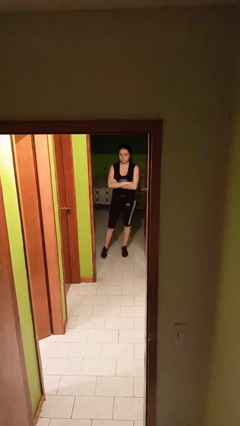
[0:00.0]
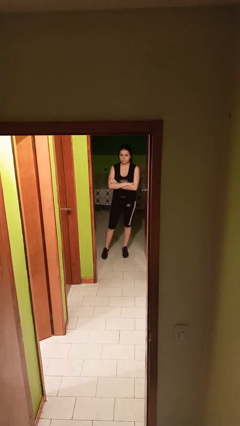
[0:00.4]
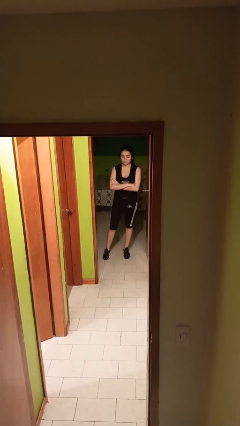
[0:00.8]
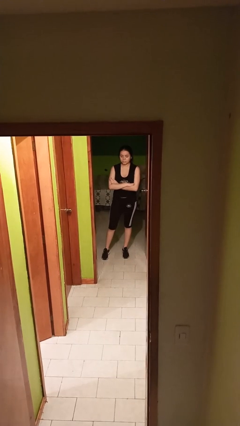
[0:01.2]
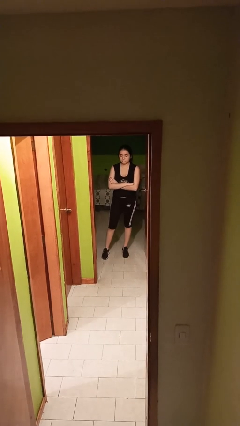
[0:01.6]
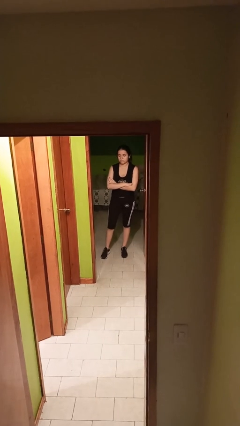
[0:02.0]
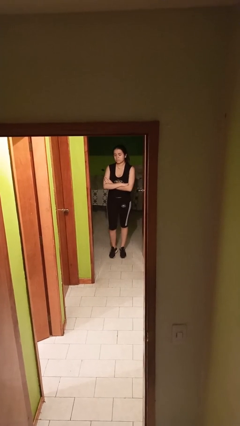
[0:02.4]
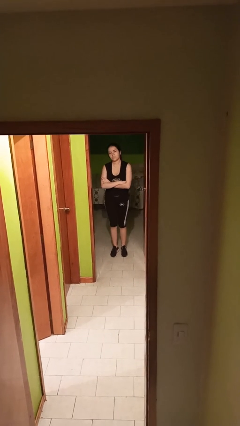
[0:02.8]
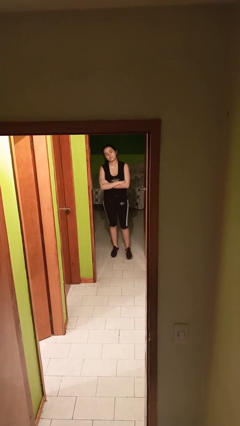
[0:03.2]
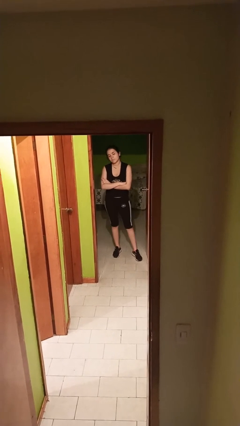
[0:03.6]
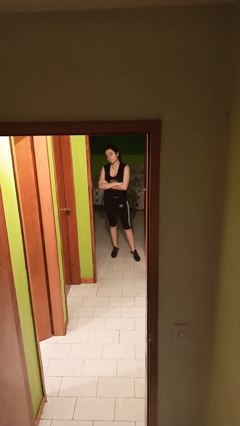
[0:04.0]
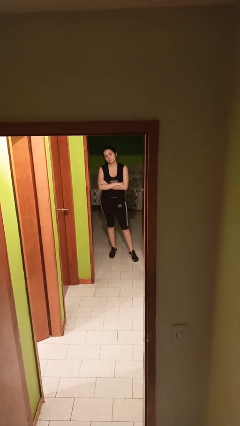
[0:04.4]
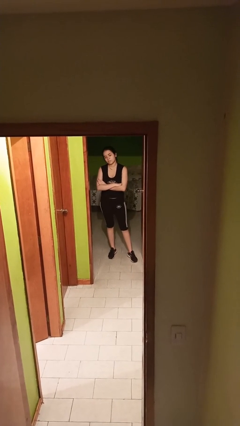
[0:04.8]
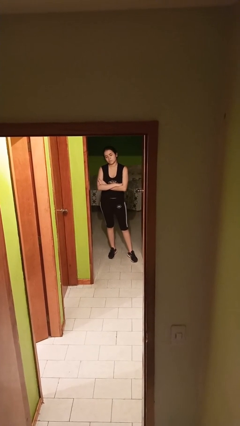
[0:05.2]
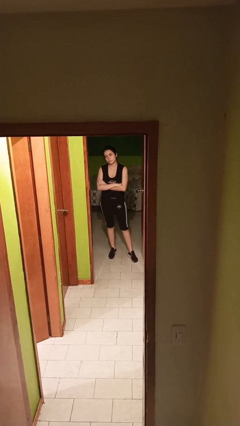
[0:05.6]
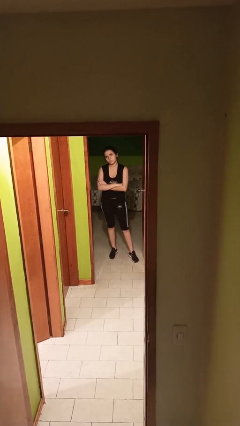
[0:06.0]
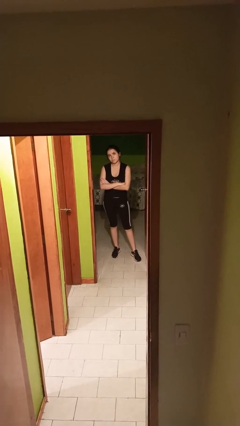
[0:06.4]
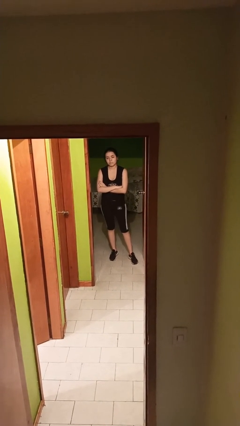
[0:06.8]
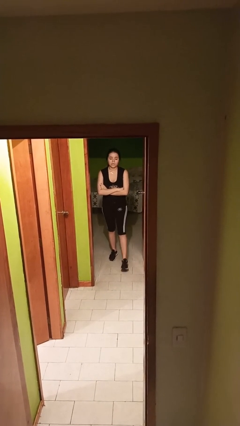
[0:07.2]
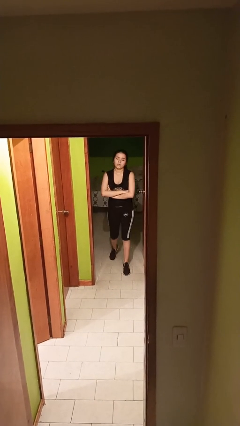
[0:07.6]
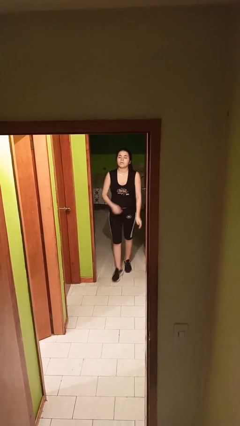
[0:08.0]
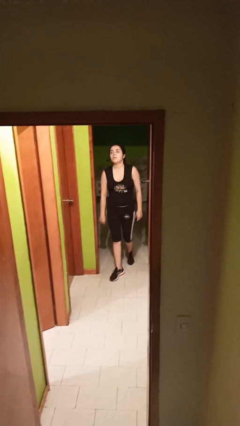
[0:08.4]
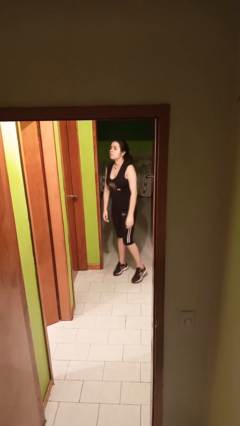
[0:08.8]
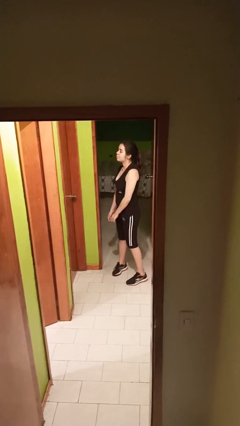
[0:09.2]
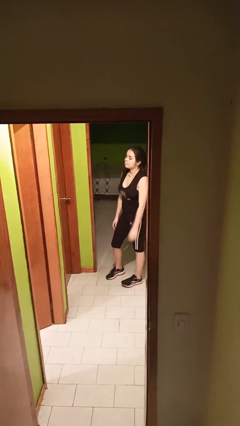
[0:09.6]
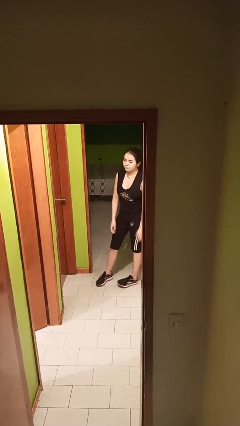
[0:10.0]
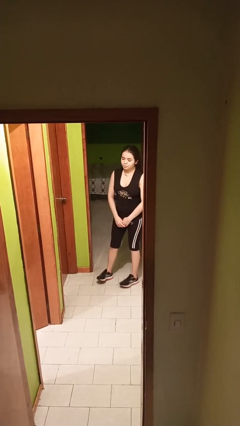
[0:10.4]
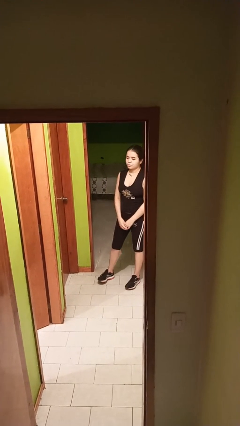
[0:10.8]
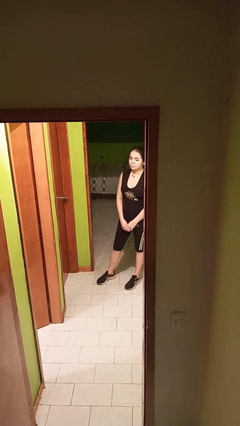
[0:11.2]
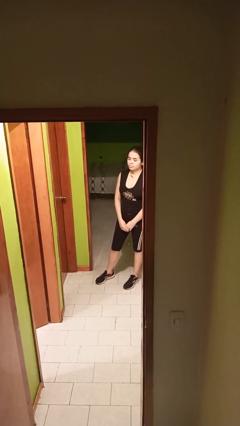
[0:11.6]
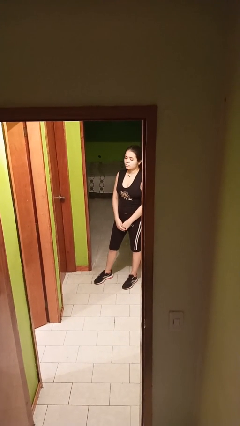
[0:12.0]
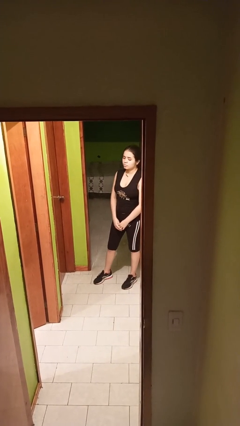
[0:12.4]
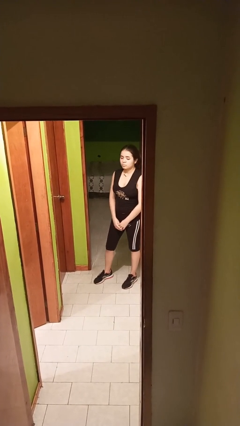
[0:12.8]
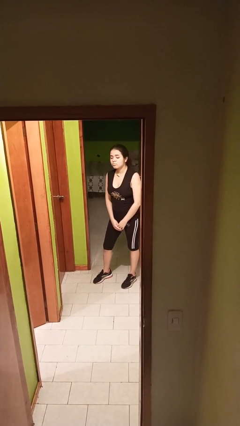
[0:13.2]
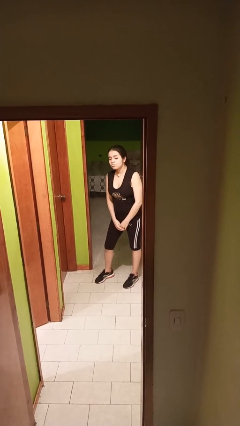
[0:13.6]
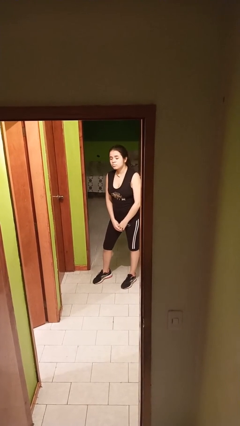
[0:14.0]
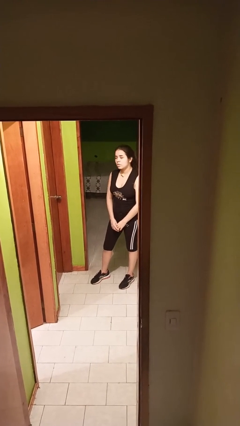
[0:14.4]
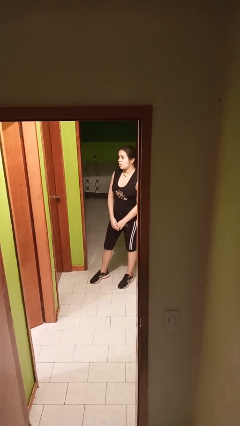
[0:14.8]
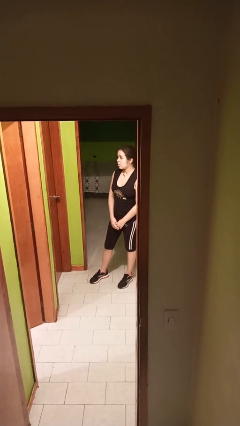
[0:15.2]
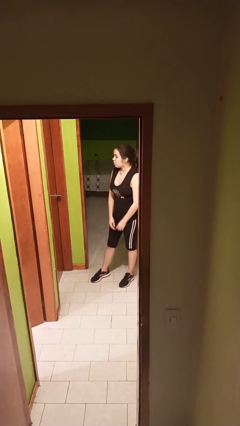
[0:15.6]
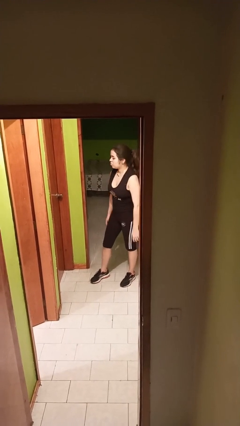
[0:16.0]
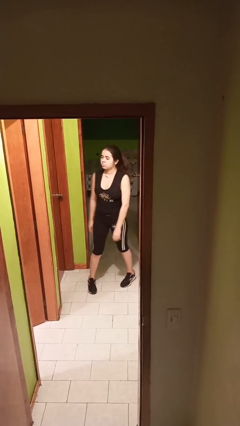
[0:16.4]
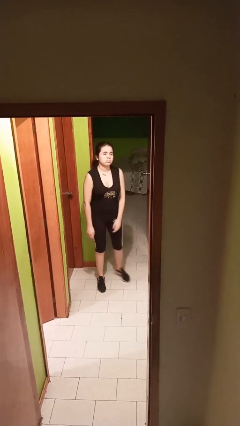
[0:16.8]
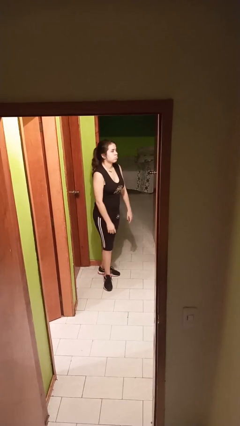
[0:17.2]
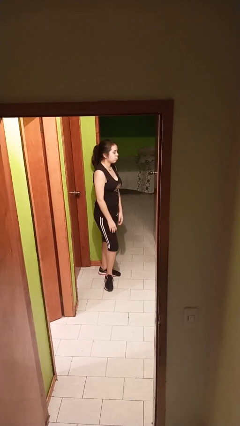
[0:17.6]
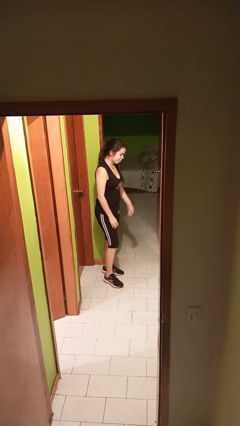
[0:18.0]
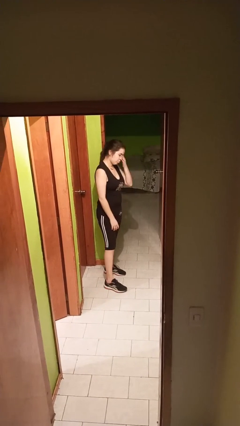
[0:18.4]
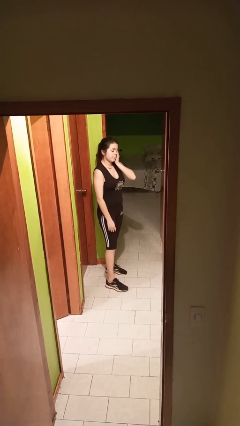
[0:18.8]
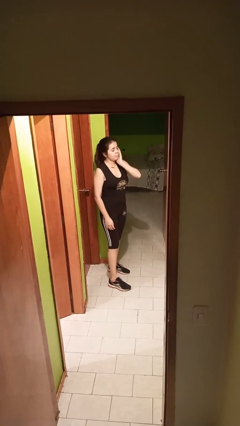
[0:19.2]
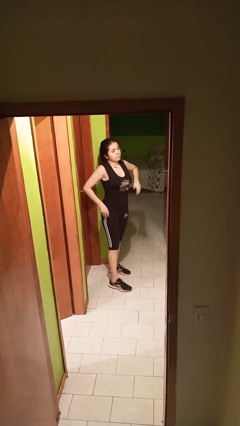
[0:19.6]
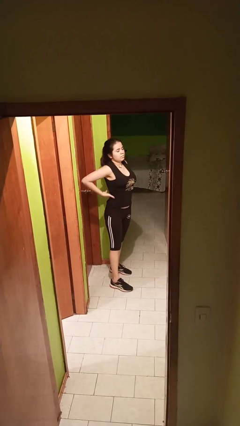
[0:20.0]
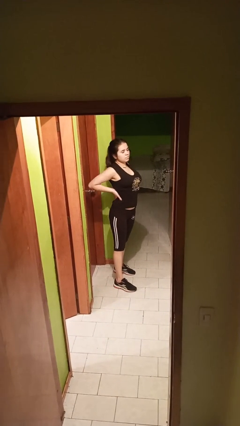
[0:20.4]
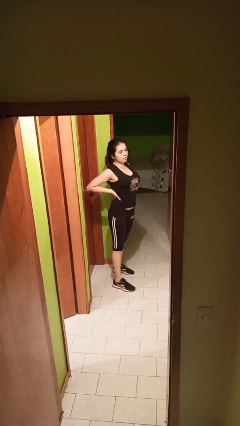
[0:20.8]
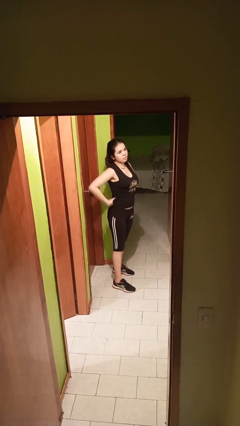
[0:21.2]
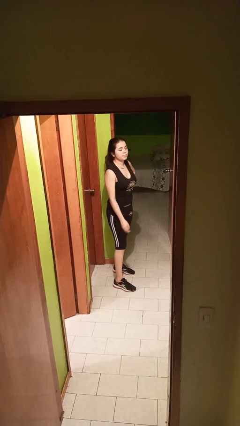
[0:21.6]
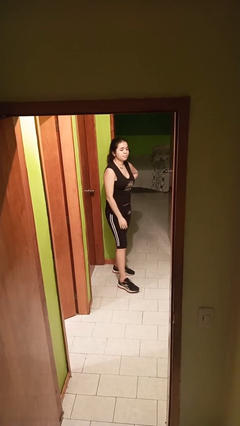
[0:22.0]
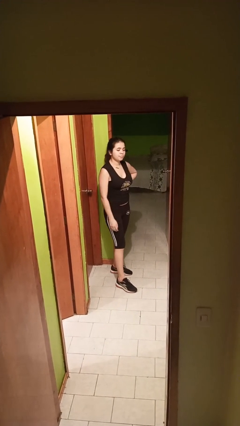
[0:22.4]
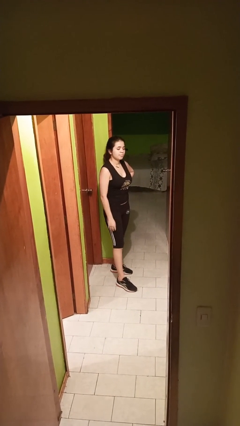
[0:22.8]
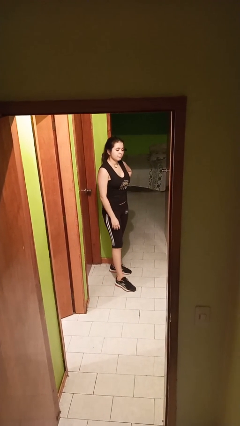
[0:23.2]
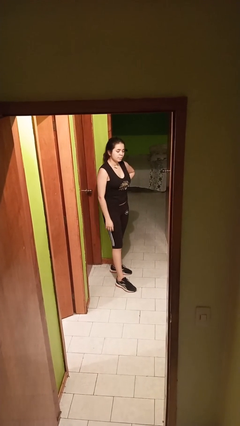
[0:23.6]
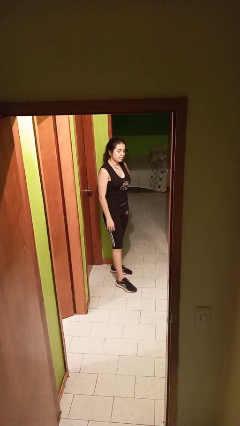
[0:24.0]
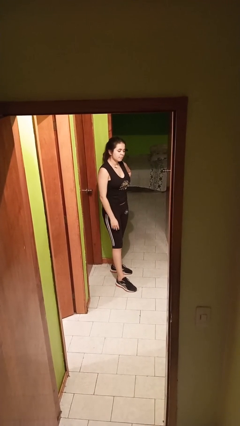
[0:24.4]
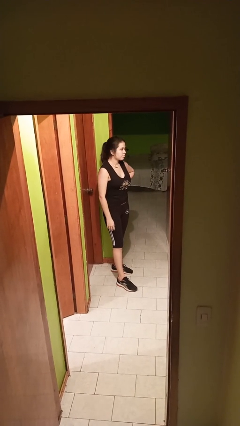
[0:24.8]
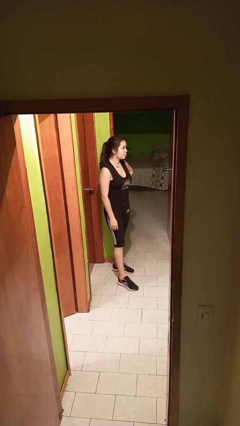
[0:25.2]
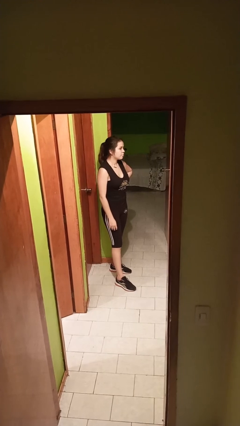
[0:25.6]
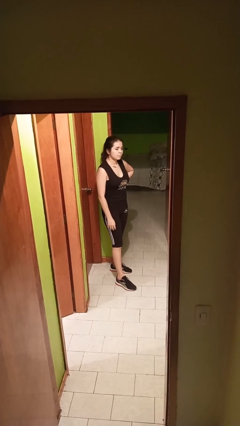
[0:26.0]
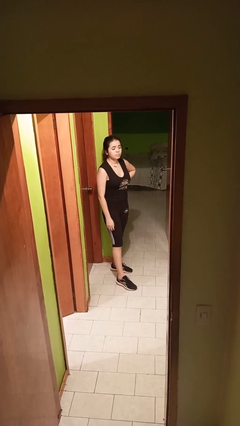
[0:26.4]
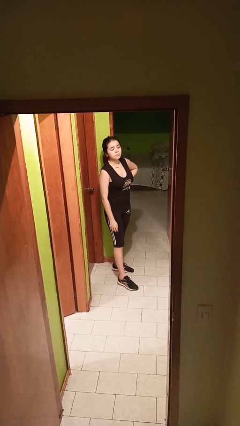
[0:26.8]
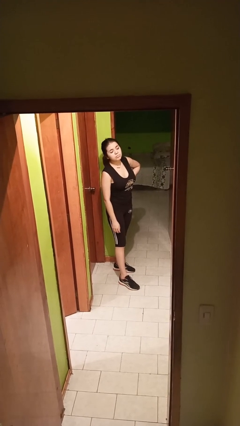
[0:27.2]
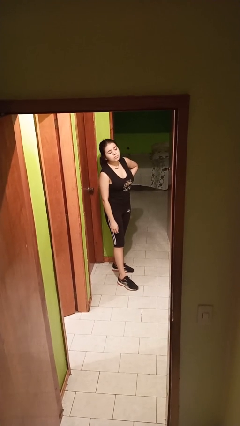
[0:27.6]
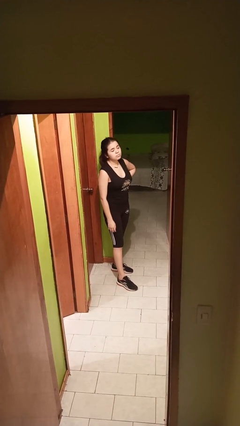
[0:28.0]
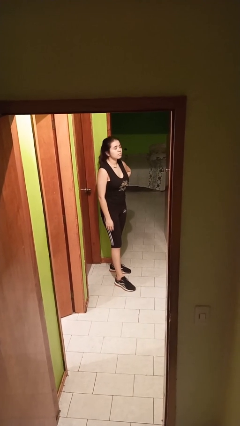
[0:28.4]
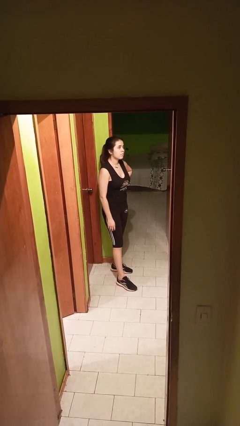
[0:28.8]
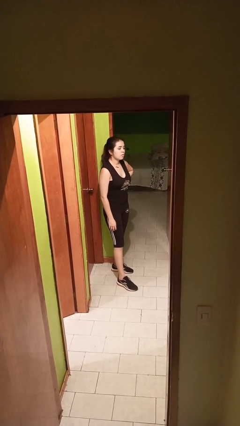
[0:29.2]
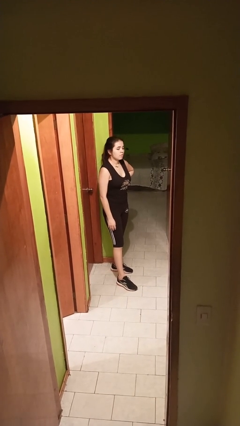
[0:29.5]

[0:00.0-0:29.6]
person walks

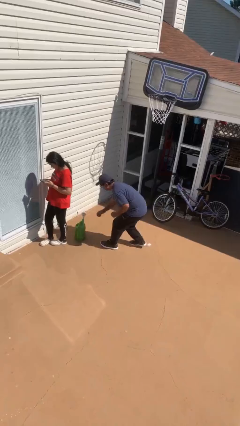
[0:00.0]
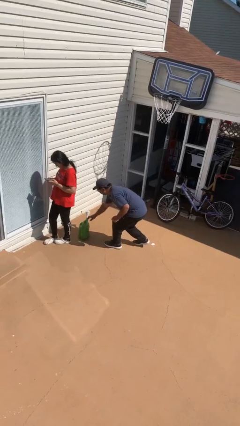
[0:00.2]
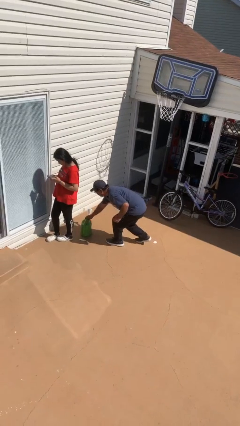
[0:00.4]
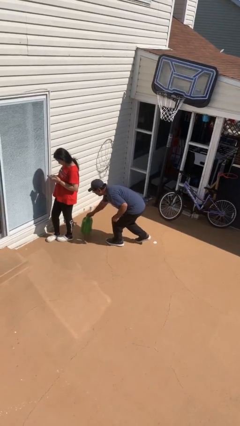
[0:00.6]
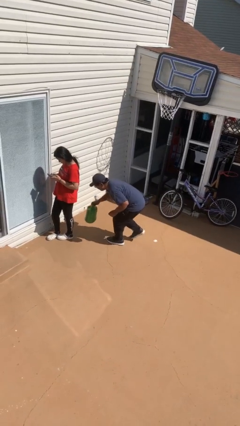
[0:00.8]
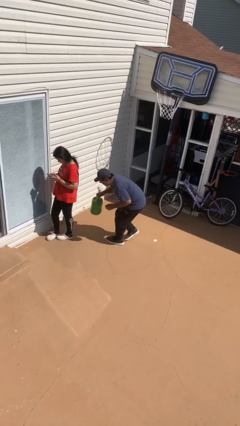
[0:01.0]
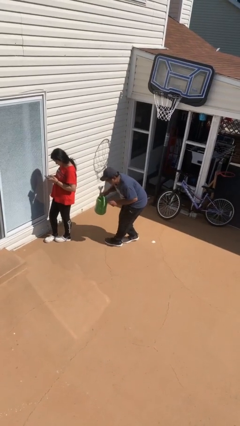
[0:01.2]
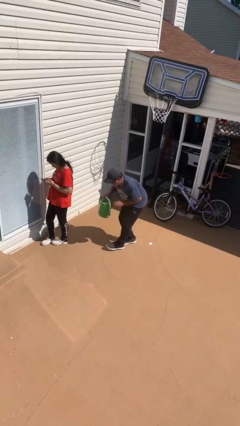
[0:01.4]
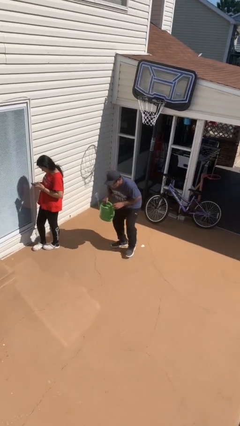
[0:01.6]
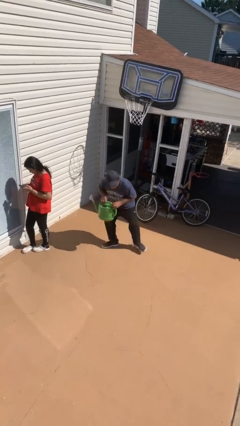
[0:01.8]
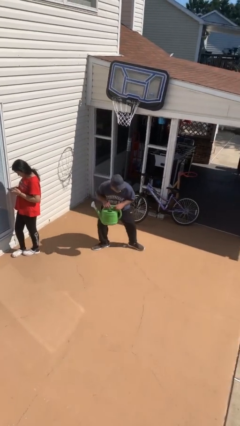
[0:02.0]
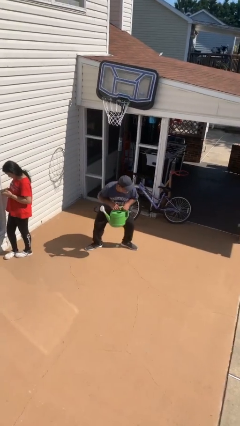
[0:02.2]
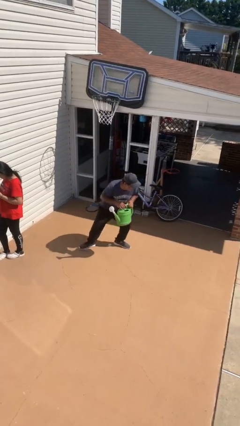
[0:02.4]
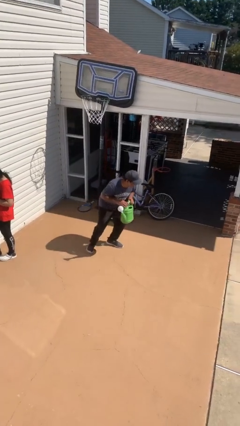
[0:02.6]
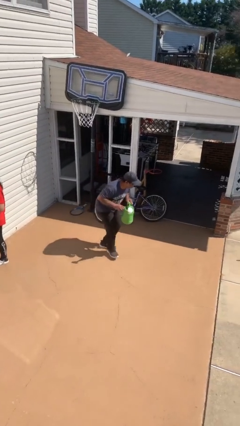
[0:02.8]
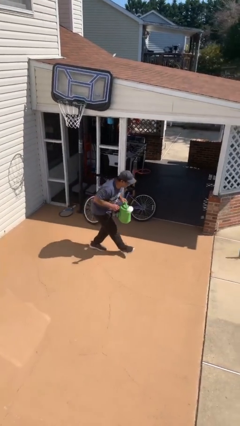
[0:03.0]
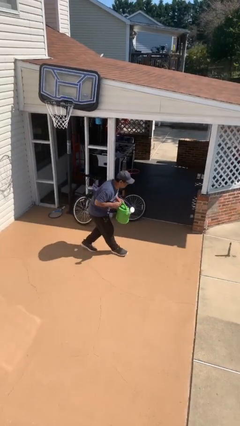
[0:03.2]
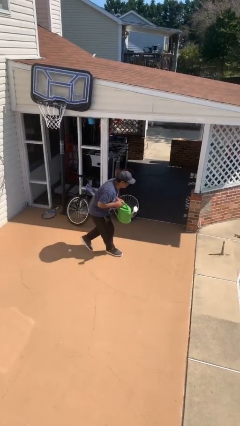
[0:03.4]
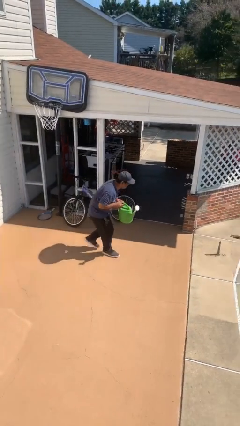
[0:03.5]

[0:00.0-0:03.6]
person steals object from person
